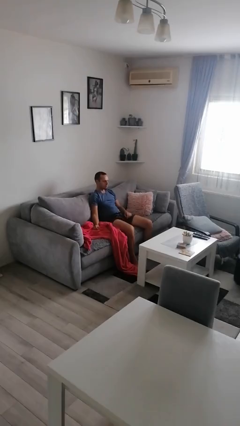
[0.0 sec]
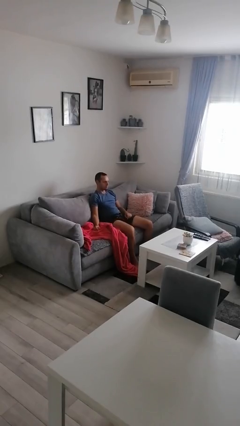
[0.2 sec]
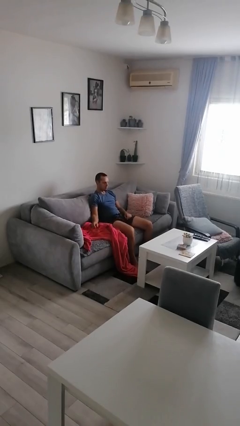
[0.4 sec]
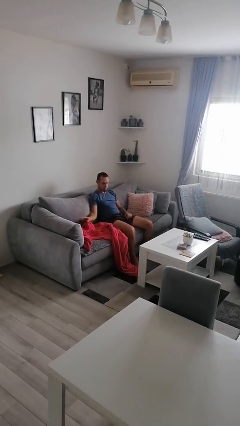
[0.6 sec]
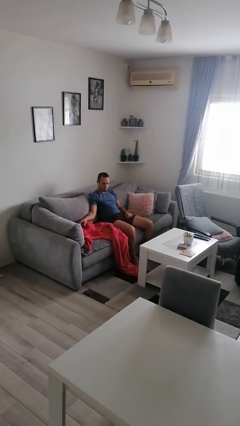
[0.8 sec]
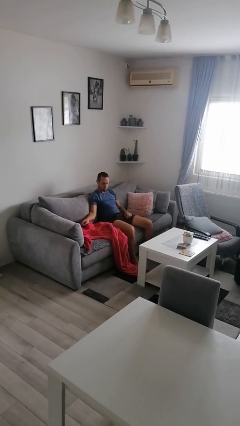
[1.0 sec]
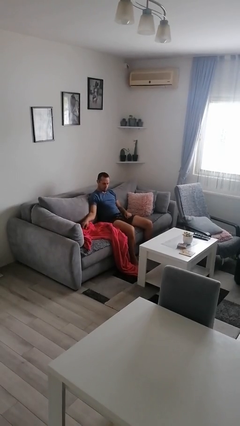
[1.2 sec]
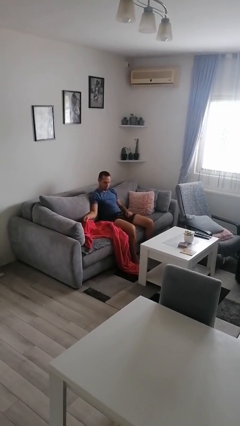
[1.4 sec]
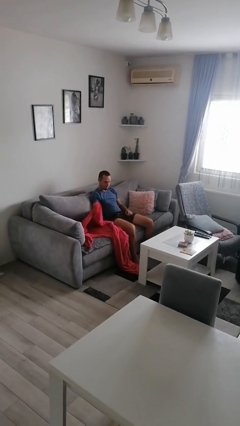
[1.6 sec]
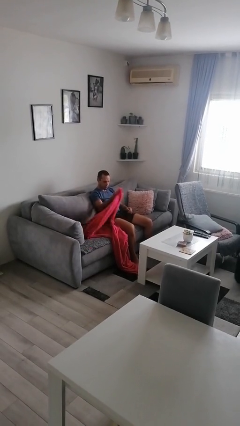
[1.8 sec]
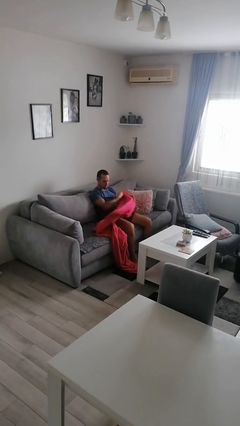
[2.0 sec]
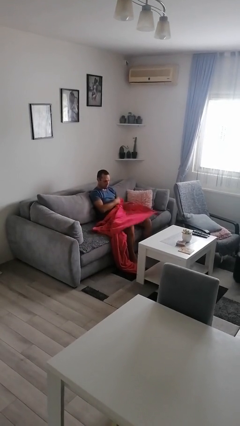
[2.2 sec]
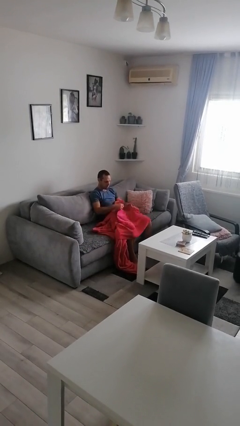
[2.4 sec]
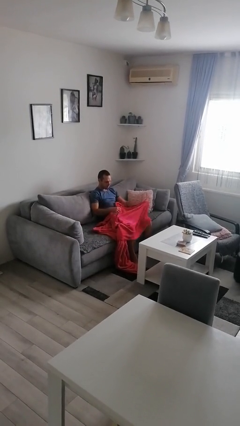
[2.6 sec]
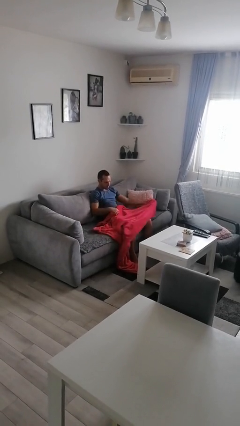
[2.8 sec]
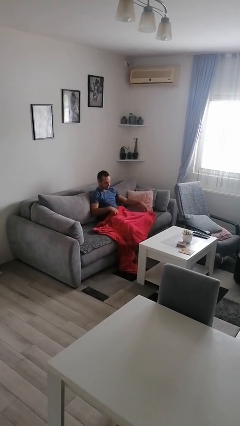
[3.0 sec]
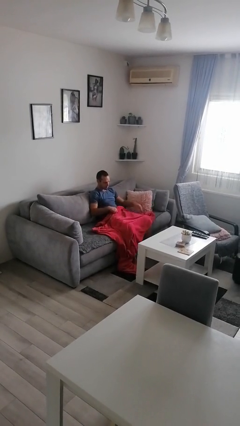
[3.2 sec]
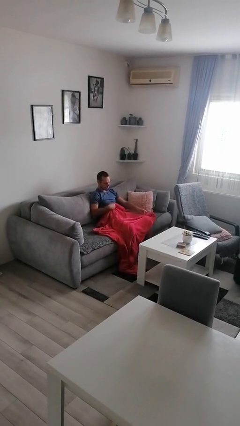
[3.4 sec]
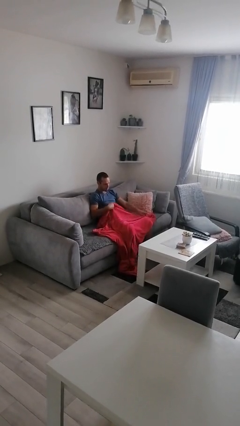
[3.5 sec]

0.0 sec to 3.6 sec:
person covers with blanket

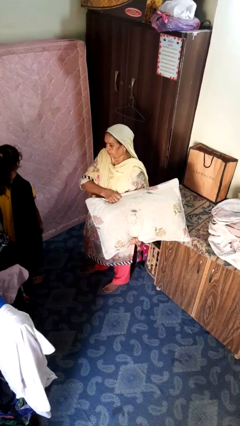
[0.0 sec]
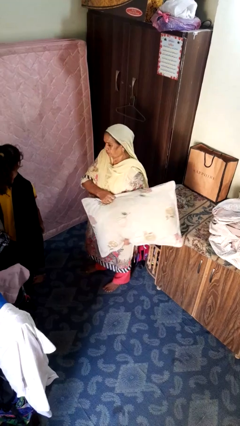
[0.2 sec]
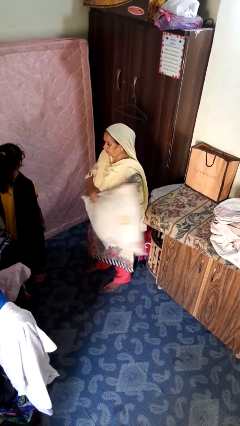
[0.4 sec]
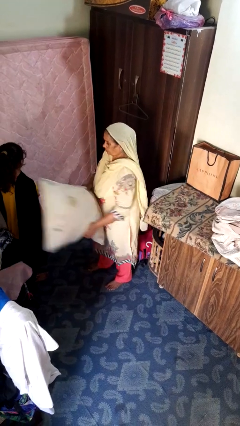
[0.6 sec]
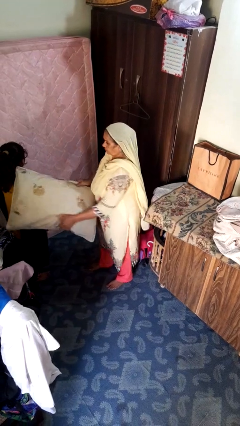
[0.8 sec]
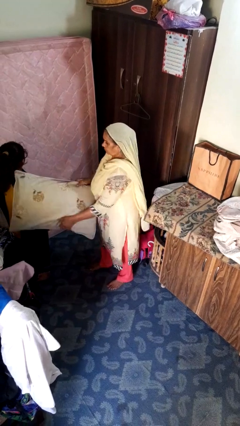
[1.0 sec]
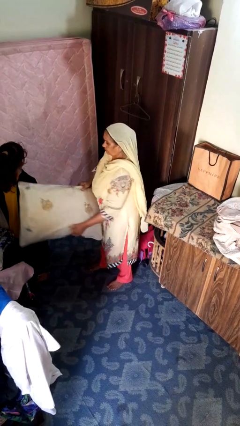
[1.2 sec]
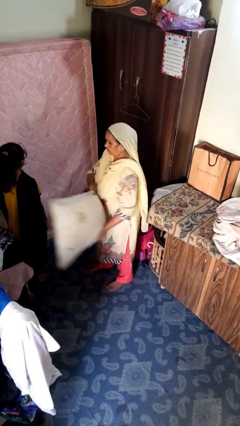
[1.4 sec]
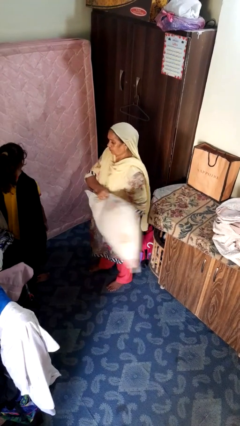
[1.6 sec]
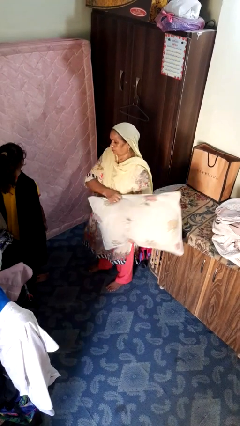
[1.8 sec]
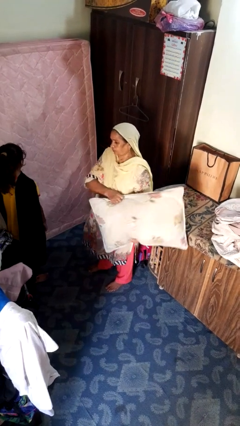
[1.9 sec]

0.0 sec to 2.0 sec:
person hits person with pillow

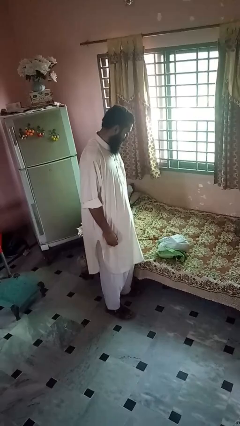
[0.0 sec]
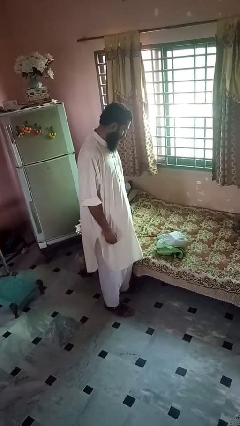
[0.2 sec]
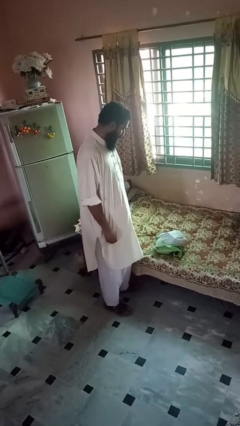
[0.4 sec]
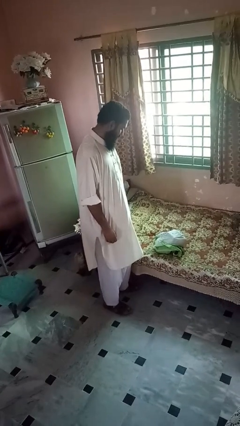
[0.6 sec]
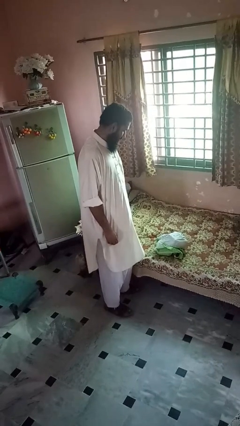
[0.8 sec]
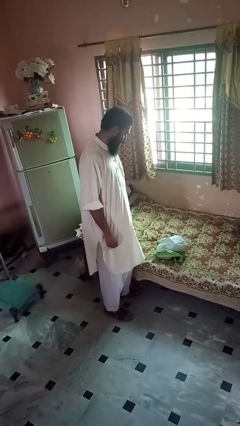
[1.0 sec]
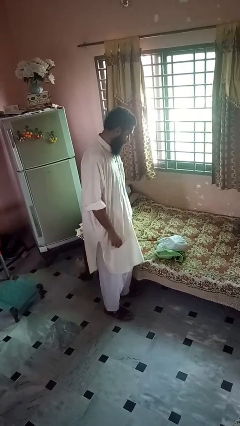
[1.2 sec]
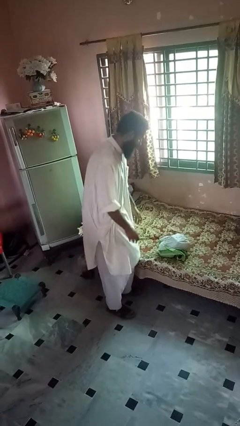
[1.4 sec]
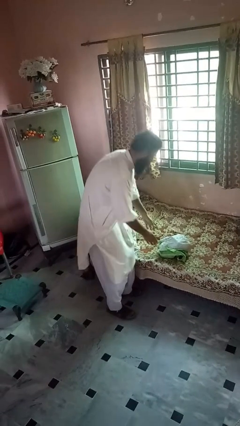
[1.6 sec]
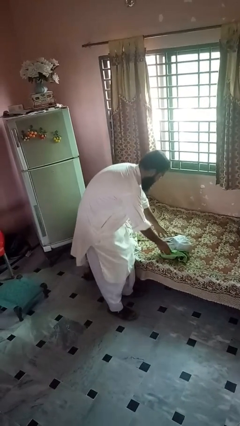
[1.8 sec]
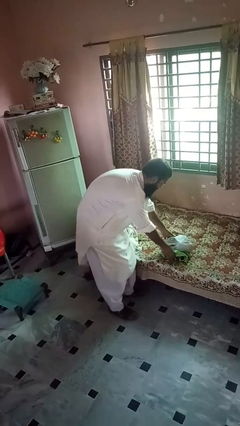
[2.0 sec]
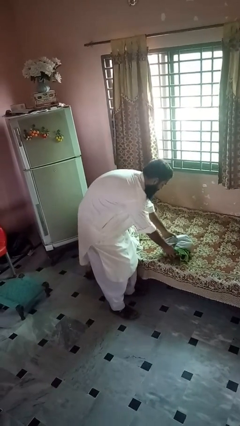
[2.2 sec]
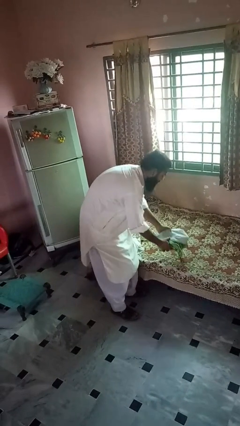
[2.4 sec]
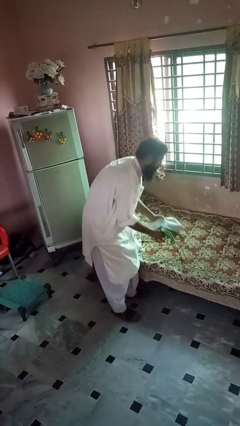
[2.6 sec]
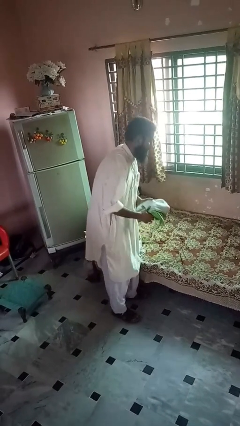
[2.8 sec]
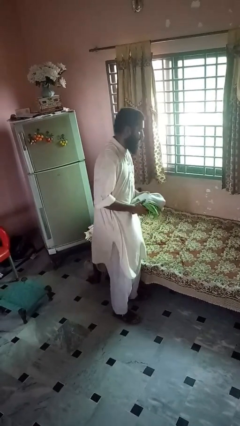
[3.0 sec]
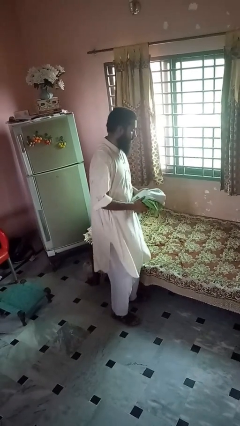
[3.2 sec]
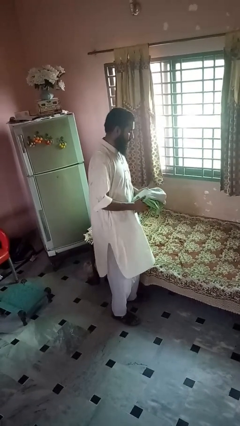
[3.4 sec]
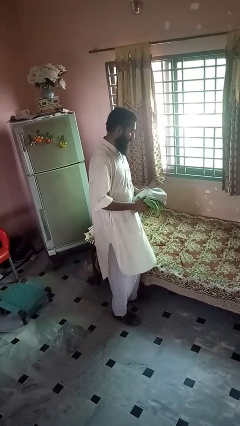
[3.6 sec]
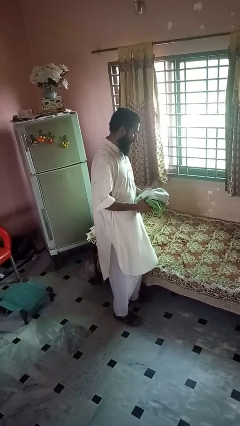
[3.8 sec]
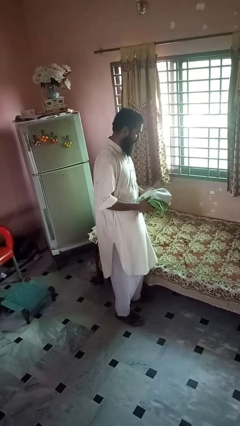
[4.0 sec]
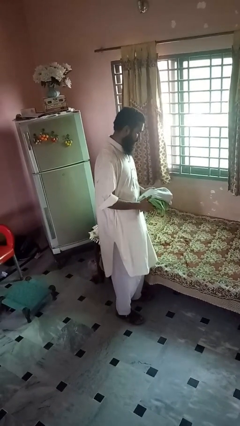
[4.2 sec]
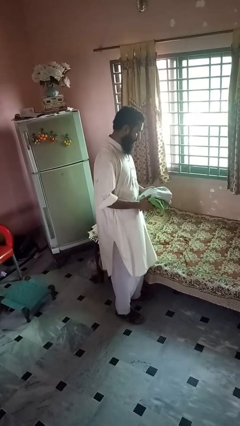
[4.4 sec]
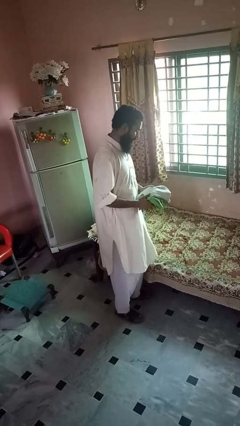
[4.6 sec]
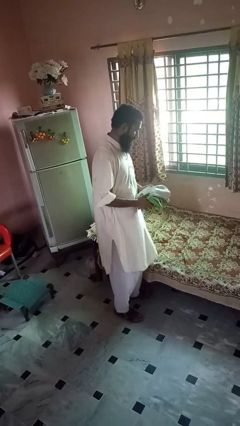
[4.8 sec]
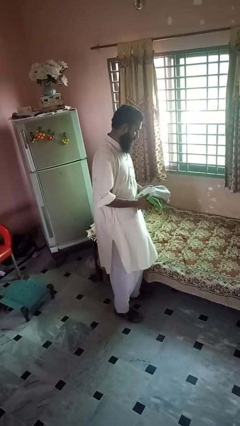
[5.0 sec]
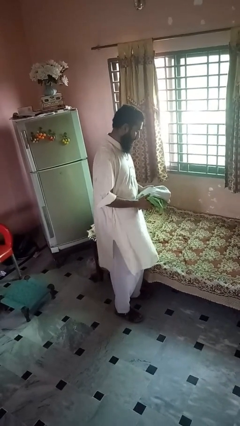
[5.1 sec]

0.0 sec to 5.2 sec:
person picks up object from bed

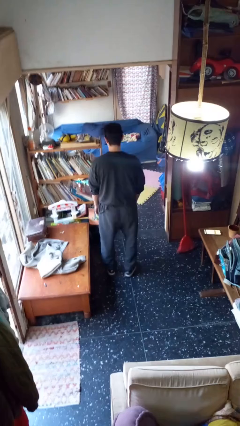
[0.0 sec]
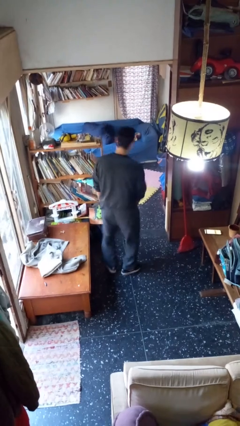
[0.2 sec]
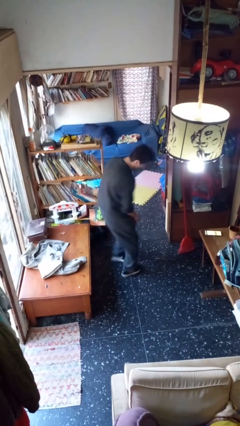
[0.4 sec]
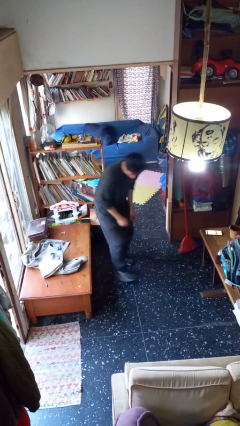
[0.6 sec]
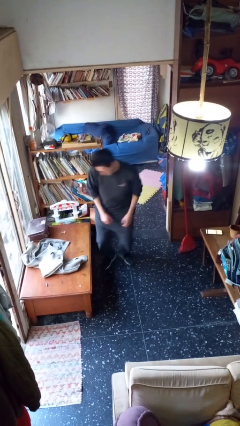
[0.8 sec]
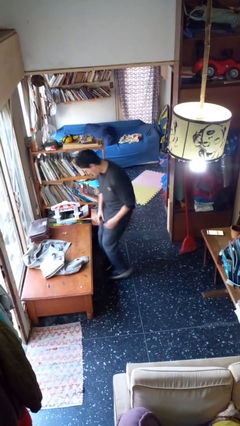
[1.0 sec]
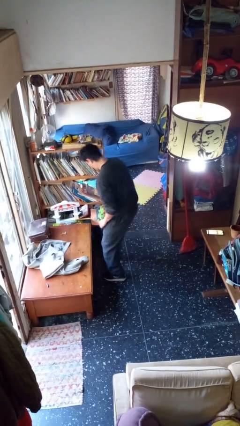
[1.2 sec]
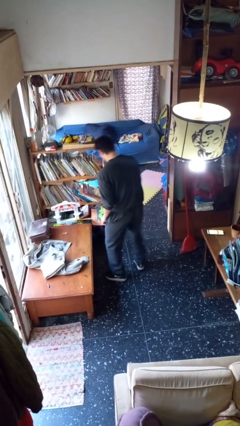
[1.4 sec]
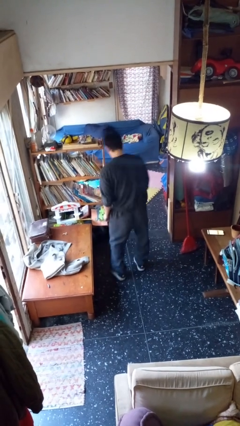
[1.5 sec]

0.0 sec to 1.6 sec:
person twirls

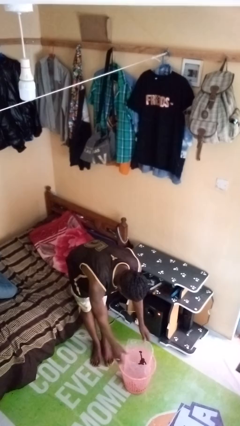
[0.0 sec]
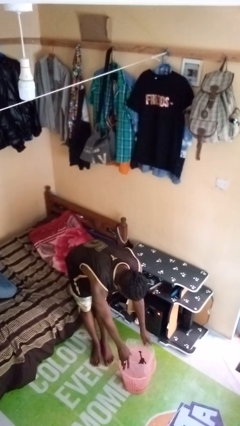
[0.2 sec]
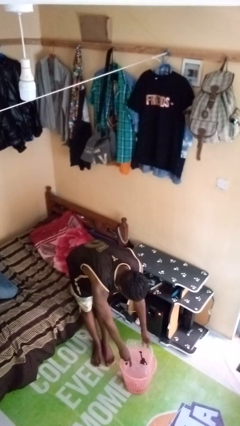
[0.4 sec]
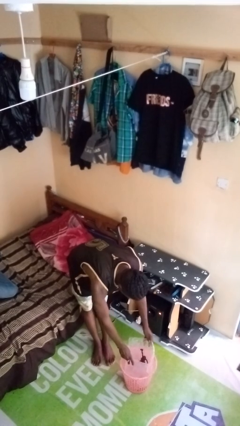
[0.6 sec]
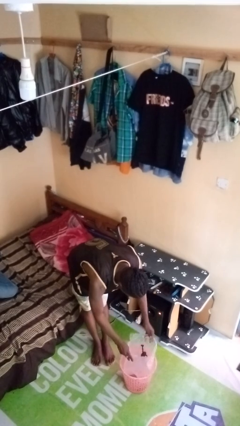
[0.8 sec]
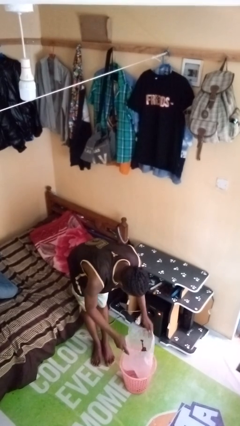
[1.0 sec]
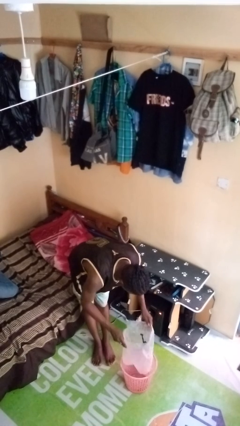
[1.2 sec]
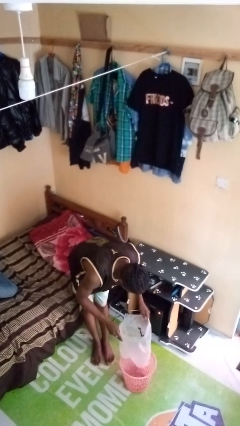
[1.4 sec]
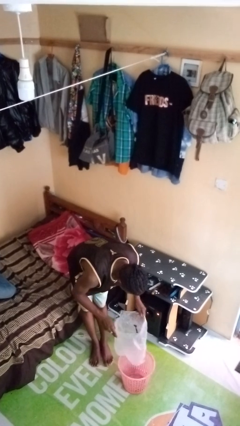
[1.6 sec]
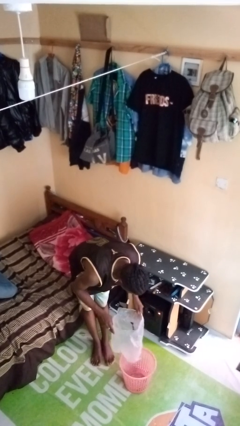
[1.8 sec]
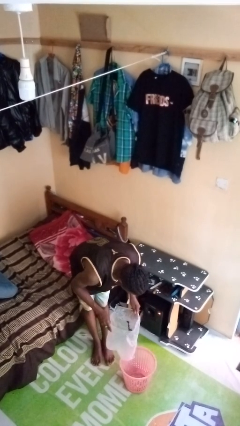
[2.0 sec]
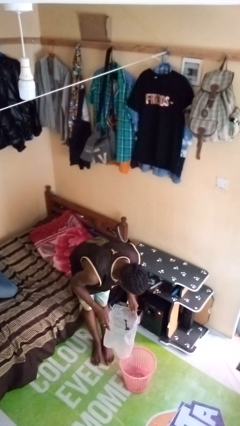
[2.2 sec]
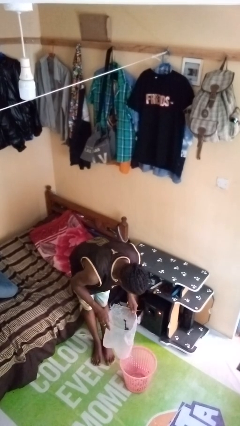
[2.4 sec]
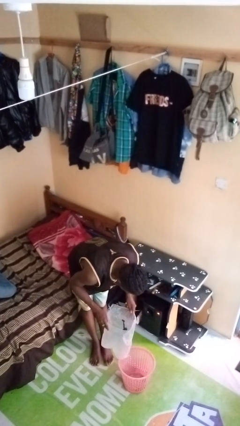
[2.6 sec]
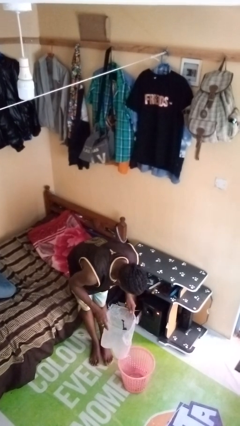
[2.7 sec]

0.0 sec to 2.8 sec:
person removes trashbag from trashcan

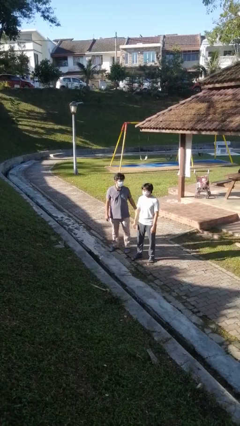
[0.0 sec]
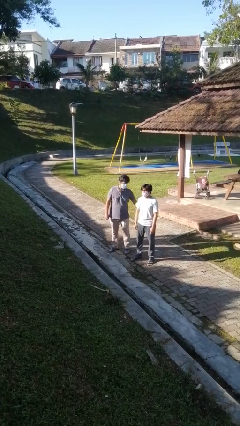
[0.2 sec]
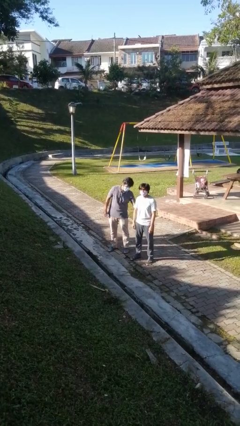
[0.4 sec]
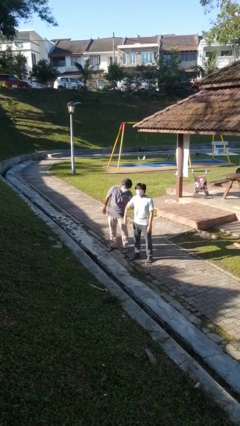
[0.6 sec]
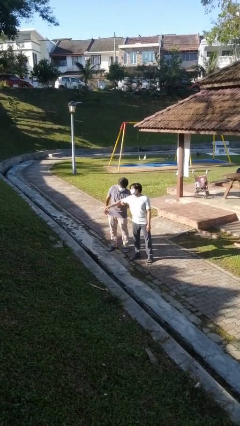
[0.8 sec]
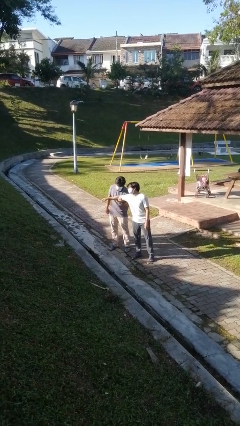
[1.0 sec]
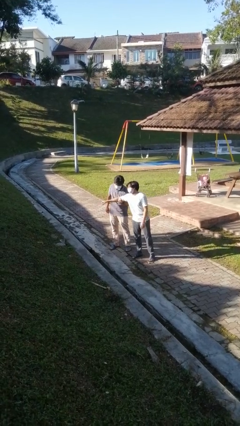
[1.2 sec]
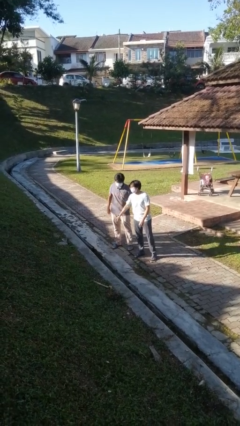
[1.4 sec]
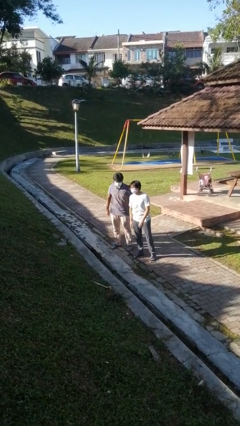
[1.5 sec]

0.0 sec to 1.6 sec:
person grabs person by bicep

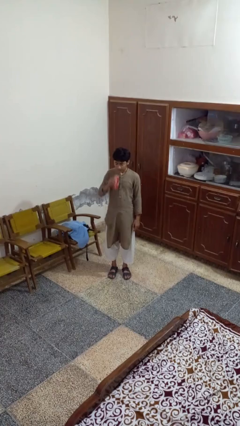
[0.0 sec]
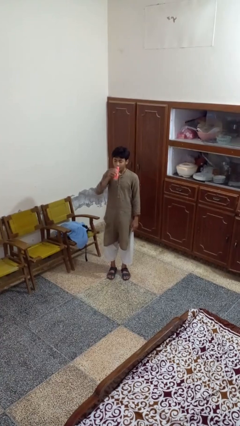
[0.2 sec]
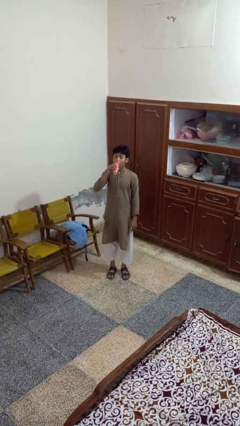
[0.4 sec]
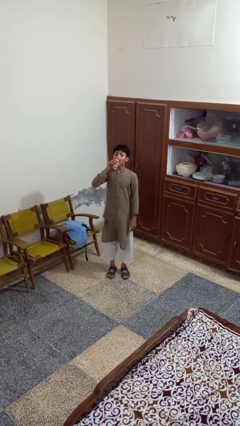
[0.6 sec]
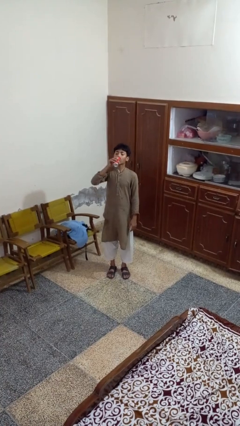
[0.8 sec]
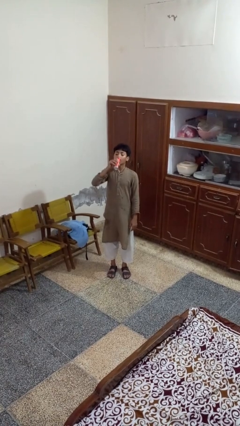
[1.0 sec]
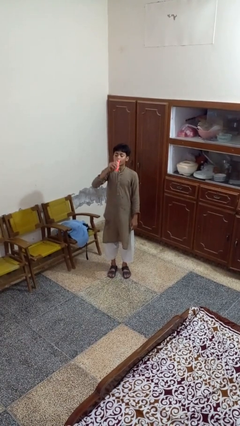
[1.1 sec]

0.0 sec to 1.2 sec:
person drinks from beverage can
